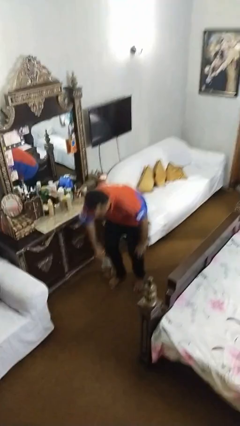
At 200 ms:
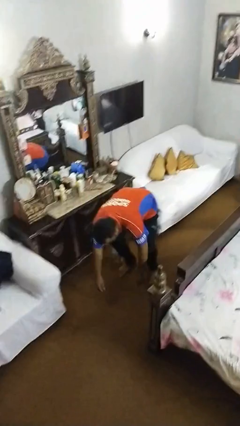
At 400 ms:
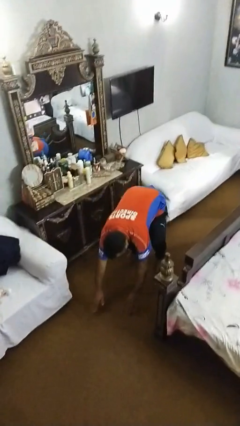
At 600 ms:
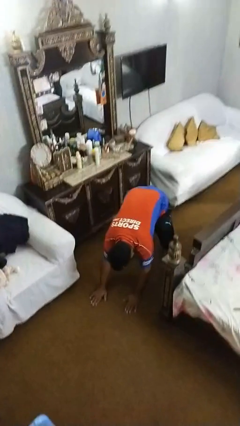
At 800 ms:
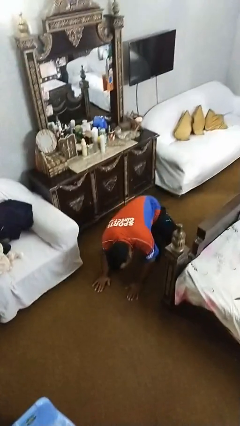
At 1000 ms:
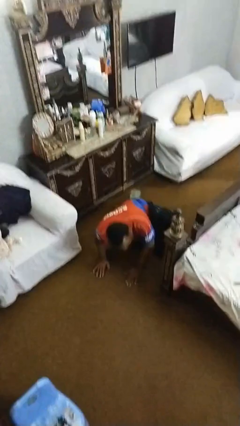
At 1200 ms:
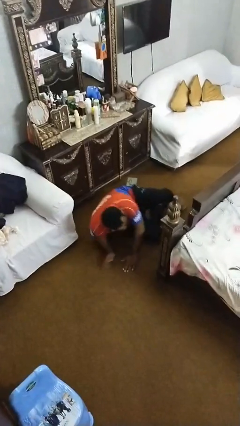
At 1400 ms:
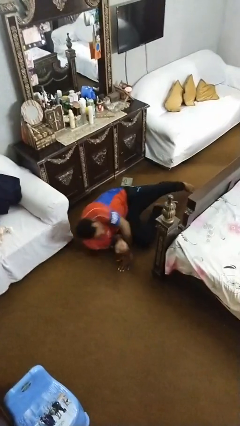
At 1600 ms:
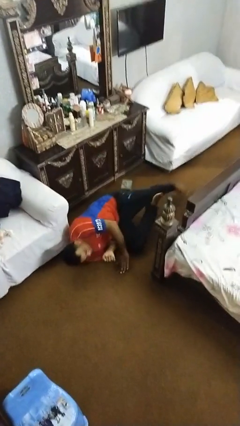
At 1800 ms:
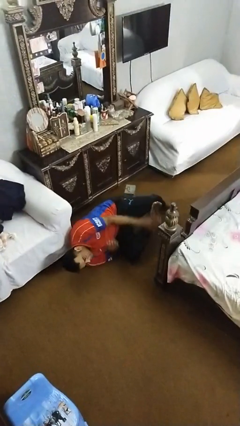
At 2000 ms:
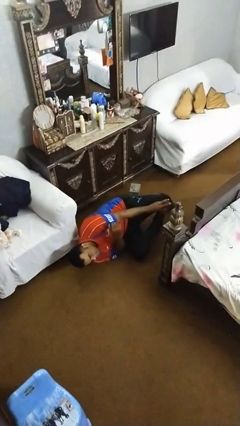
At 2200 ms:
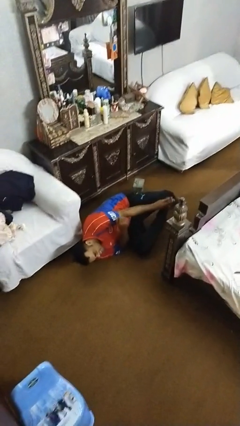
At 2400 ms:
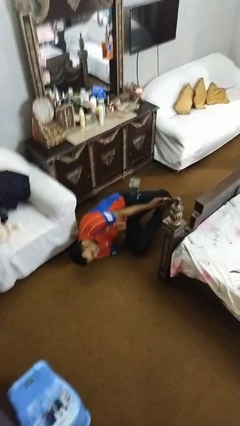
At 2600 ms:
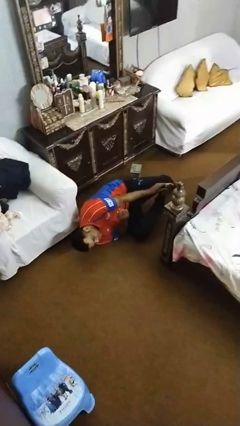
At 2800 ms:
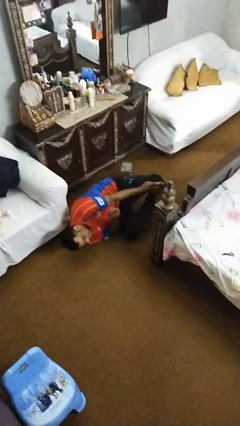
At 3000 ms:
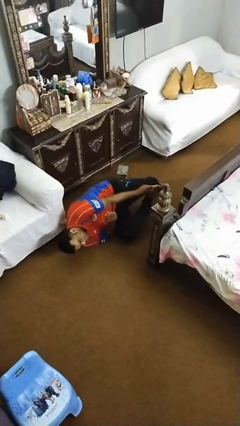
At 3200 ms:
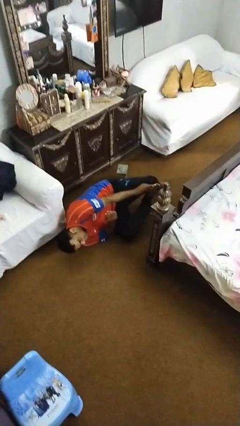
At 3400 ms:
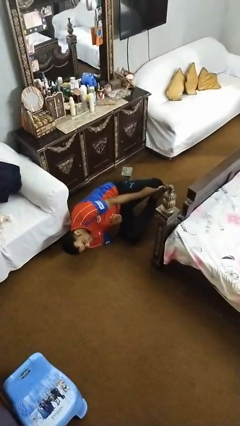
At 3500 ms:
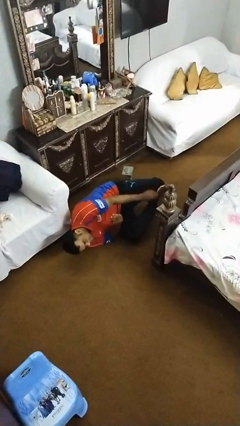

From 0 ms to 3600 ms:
person lies down on floor

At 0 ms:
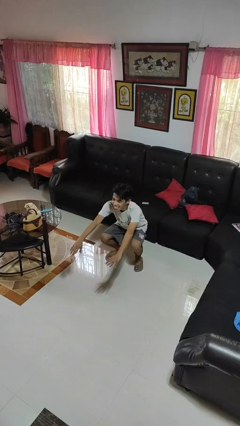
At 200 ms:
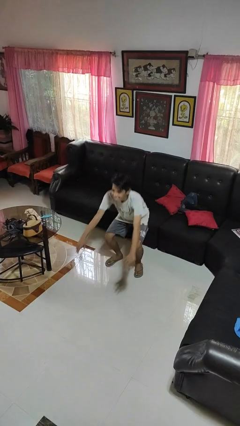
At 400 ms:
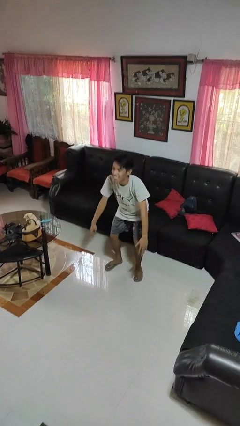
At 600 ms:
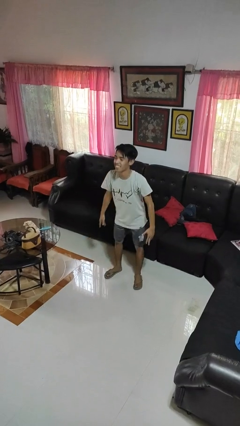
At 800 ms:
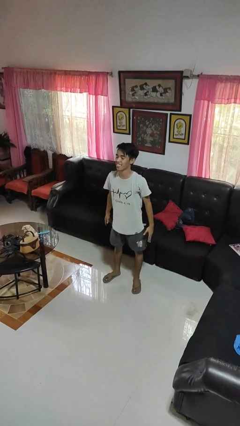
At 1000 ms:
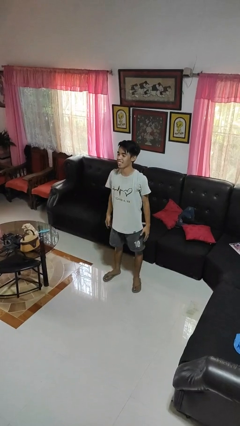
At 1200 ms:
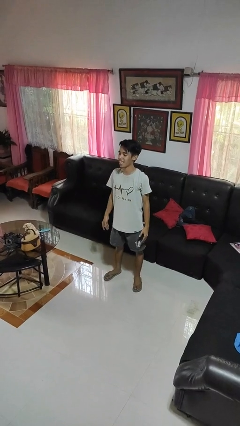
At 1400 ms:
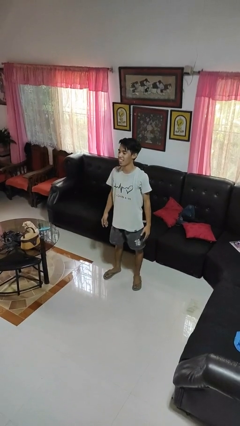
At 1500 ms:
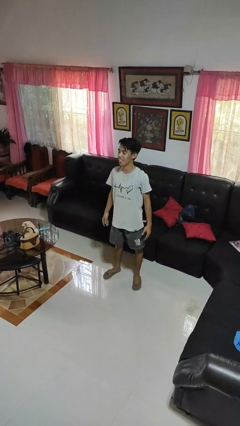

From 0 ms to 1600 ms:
person stands up

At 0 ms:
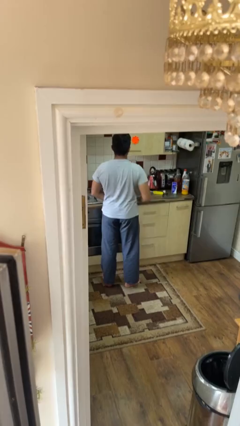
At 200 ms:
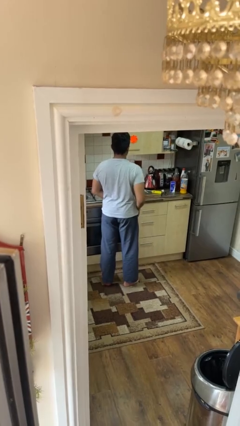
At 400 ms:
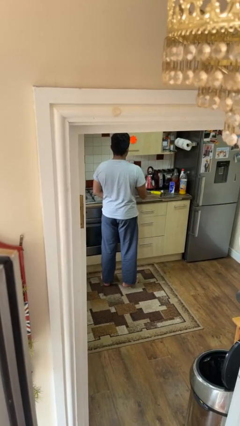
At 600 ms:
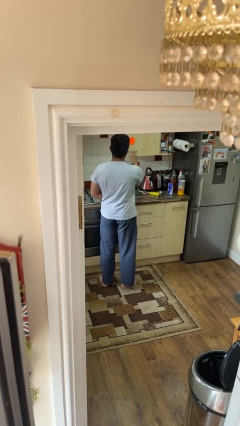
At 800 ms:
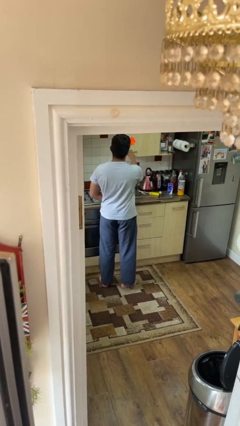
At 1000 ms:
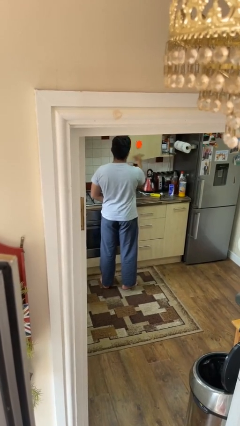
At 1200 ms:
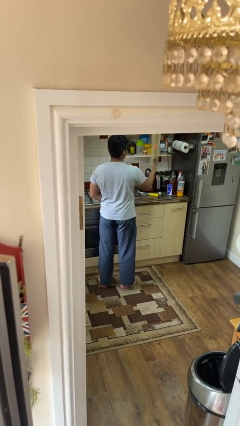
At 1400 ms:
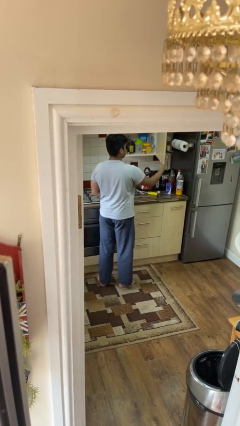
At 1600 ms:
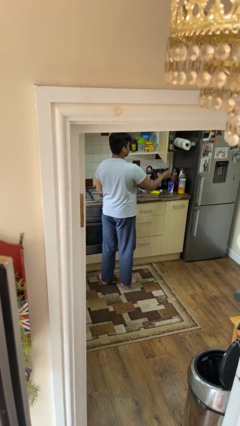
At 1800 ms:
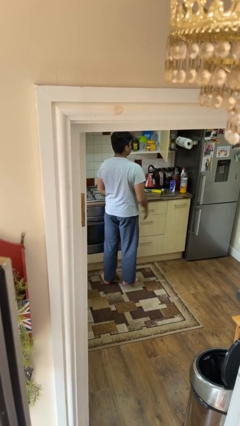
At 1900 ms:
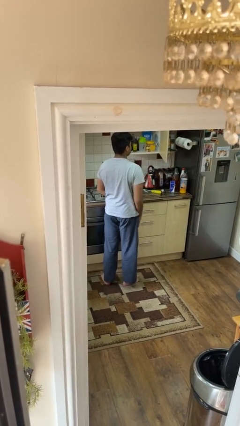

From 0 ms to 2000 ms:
person opens cabinet

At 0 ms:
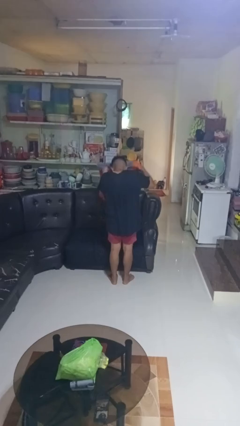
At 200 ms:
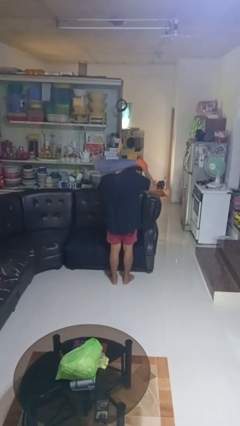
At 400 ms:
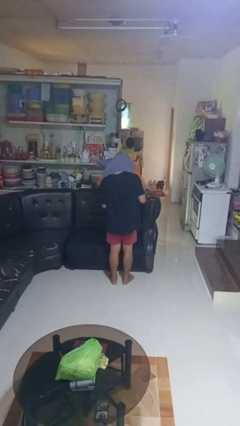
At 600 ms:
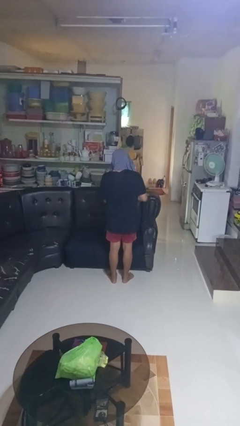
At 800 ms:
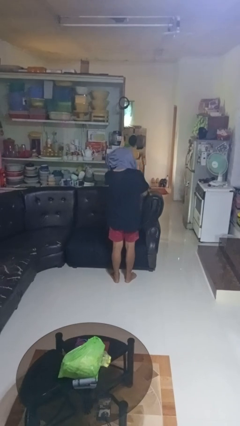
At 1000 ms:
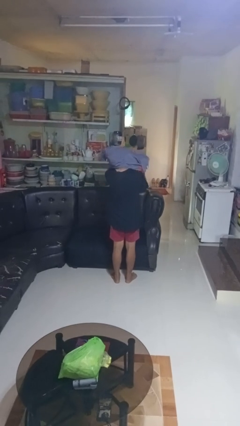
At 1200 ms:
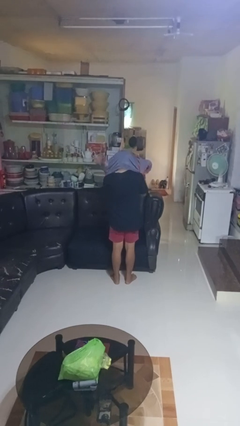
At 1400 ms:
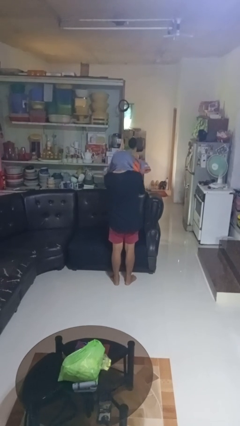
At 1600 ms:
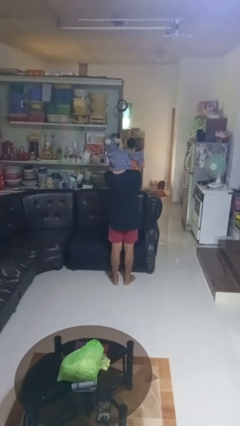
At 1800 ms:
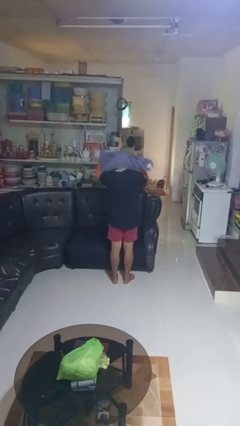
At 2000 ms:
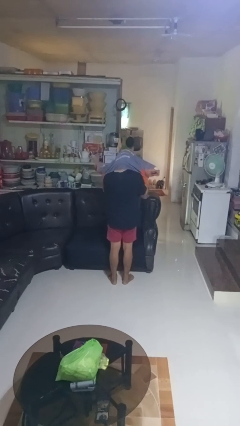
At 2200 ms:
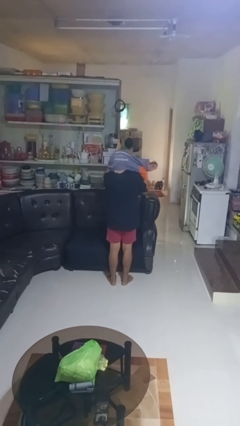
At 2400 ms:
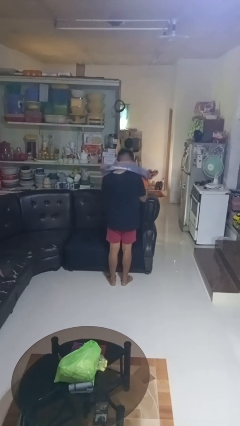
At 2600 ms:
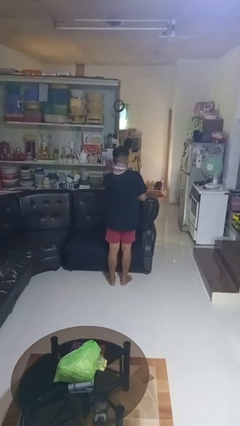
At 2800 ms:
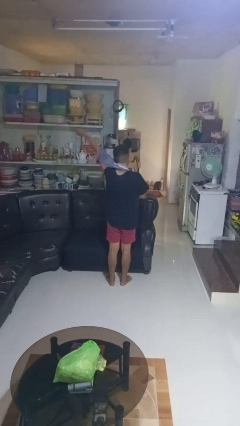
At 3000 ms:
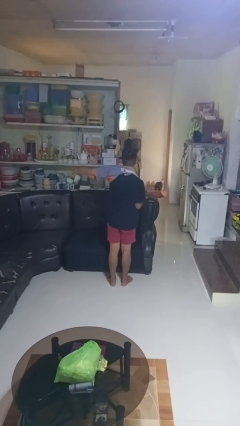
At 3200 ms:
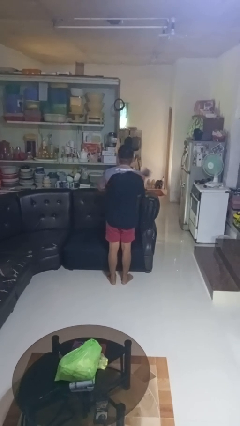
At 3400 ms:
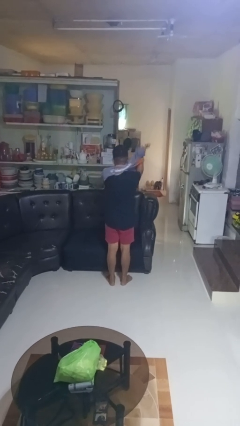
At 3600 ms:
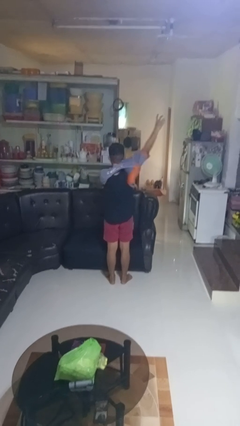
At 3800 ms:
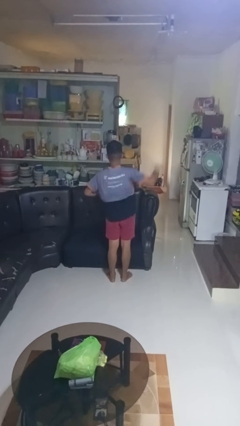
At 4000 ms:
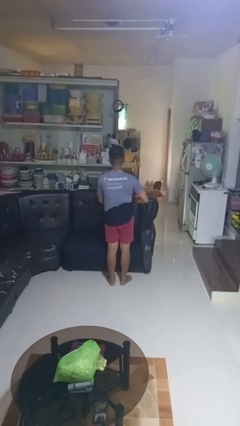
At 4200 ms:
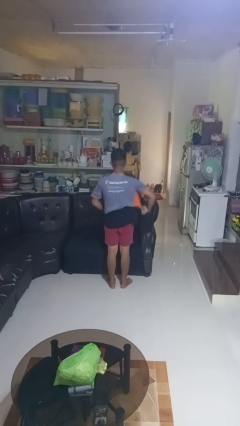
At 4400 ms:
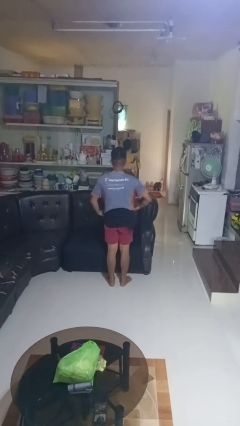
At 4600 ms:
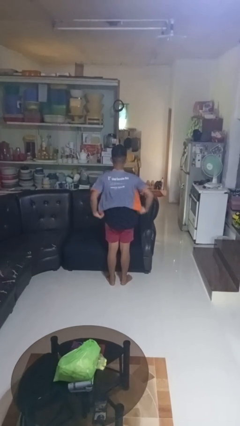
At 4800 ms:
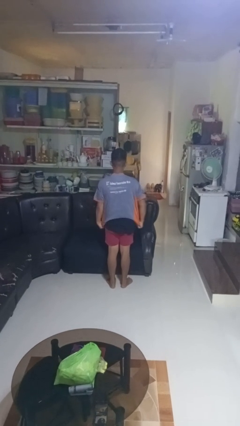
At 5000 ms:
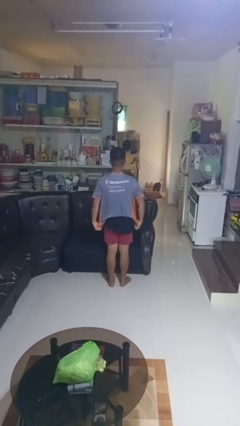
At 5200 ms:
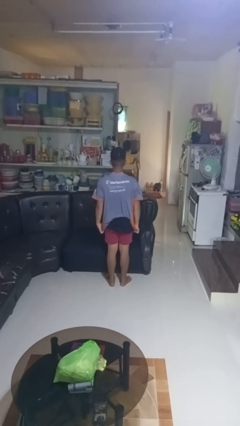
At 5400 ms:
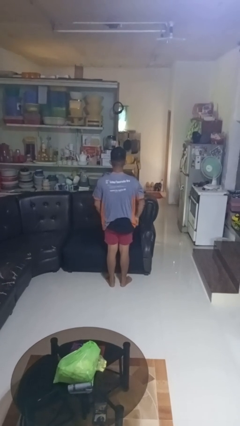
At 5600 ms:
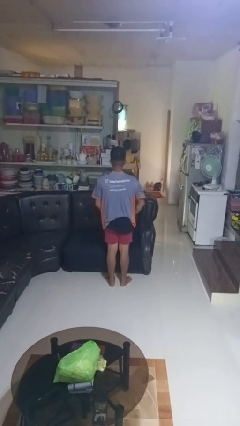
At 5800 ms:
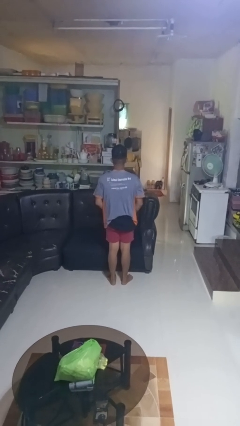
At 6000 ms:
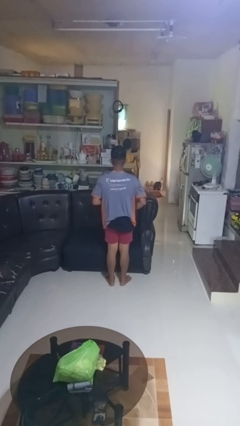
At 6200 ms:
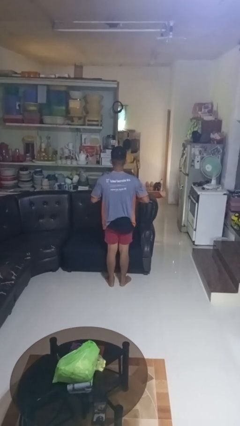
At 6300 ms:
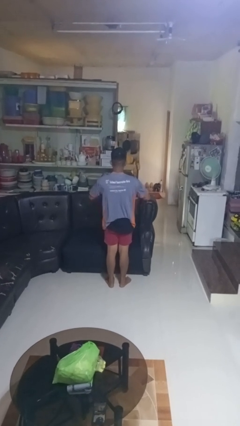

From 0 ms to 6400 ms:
person puts on shirt

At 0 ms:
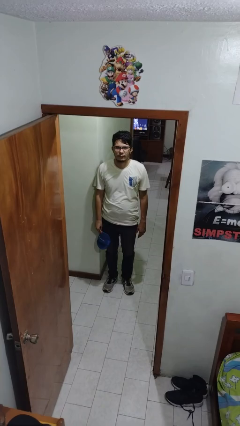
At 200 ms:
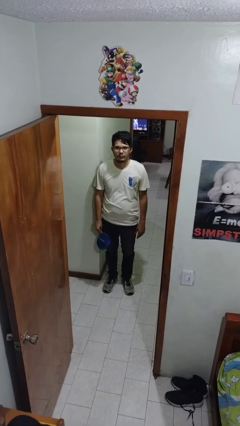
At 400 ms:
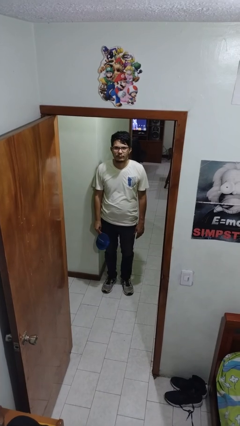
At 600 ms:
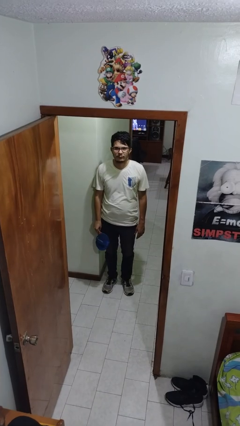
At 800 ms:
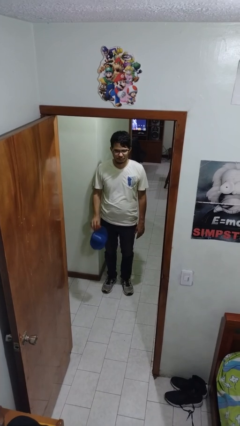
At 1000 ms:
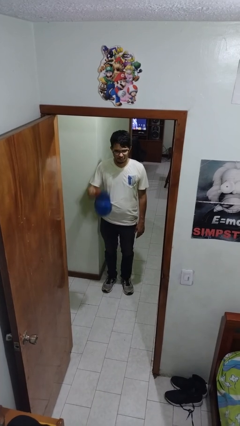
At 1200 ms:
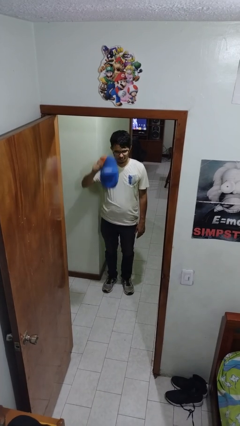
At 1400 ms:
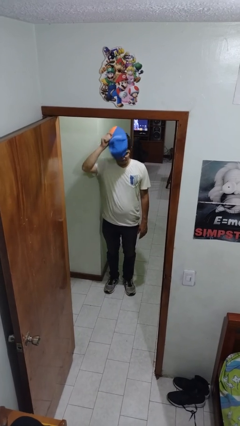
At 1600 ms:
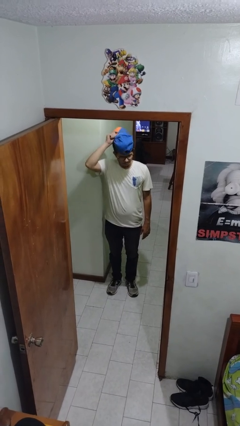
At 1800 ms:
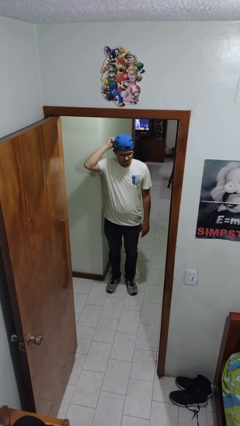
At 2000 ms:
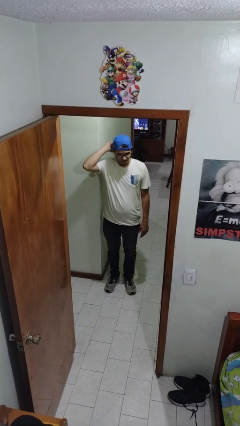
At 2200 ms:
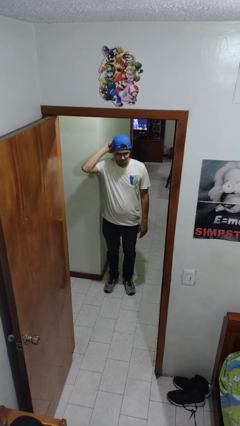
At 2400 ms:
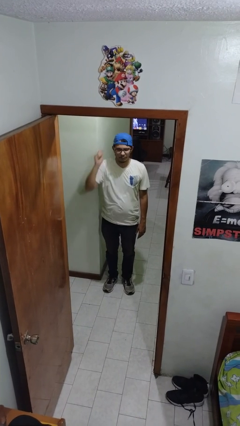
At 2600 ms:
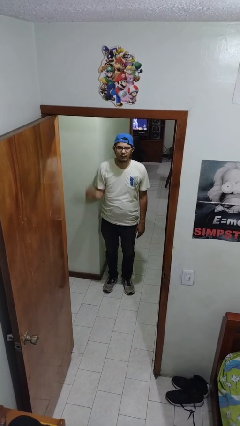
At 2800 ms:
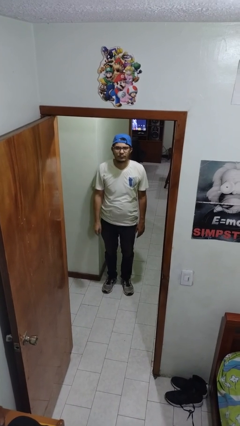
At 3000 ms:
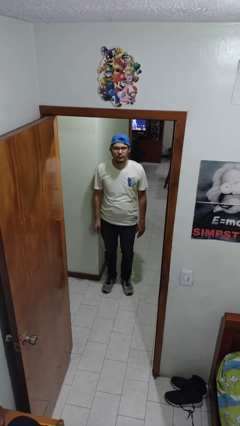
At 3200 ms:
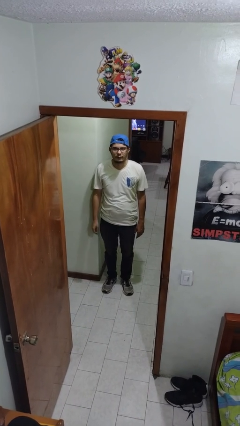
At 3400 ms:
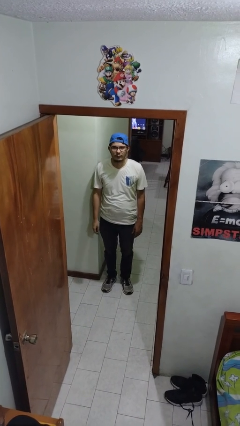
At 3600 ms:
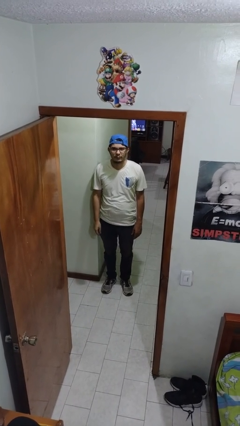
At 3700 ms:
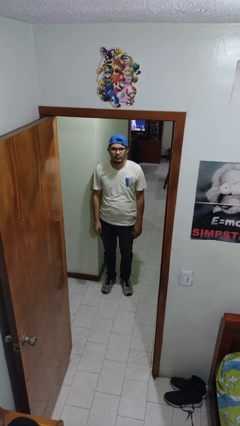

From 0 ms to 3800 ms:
person puts on hat

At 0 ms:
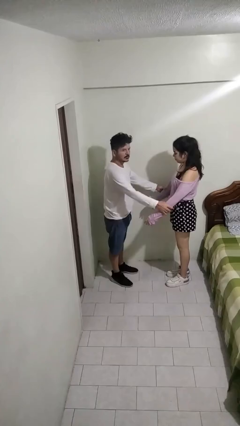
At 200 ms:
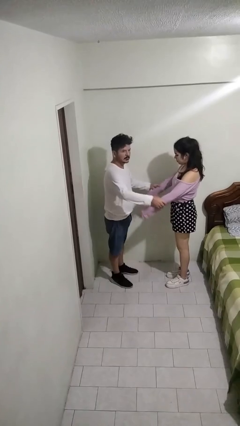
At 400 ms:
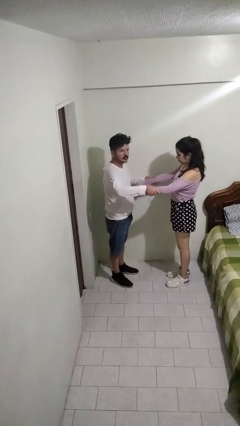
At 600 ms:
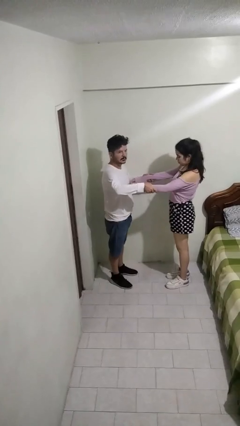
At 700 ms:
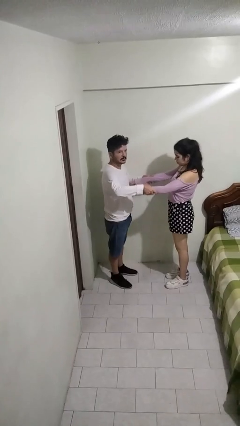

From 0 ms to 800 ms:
person grabs person by forearm
